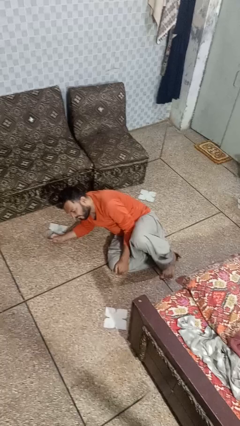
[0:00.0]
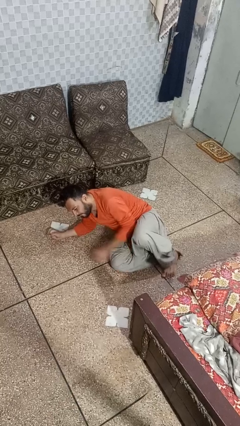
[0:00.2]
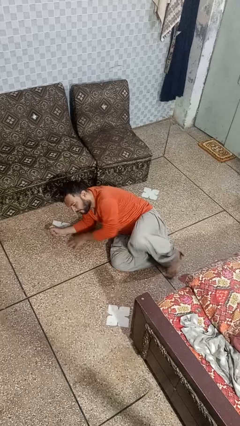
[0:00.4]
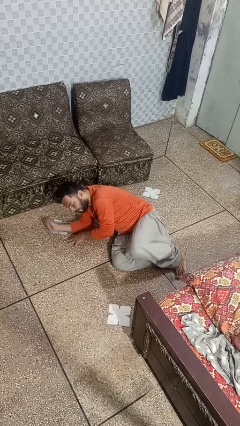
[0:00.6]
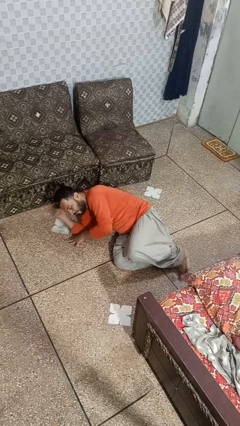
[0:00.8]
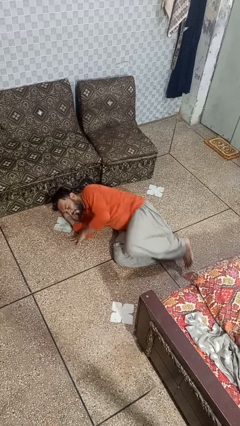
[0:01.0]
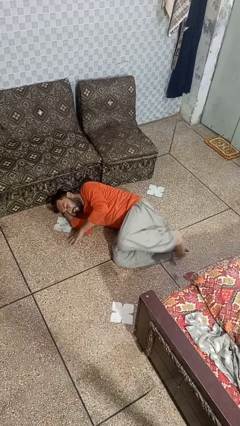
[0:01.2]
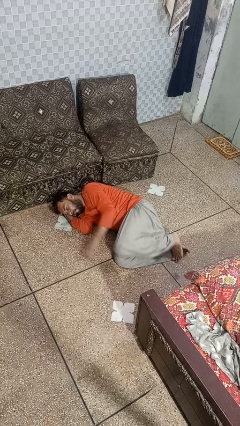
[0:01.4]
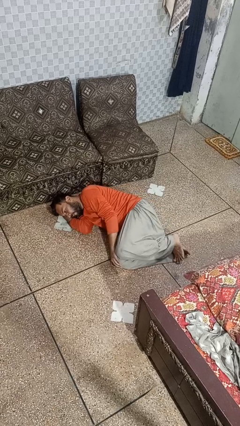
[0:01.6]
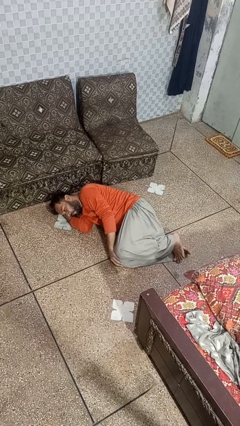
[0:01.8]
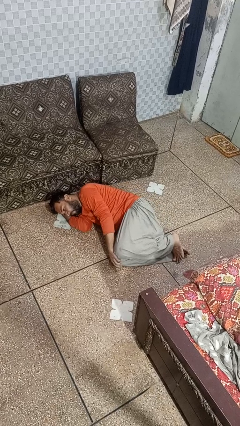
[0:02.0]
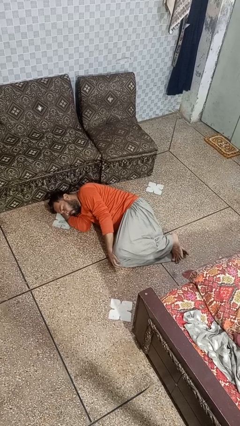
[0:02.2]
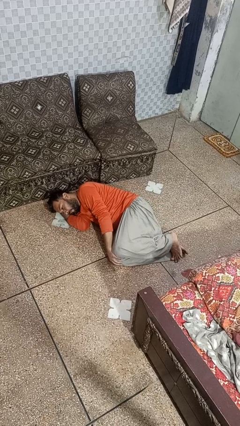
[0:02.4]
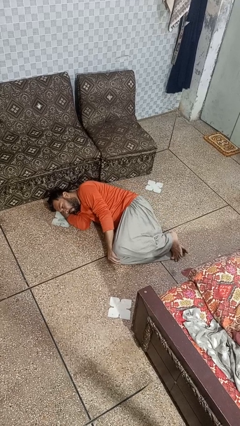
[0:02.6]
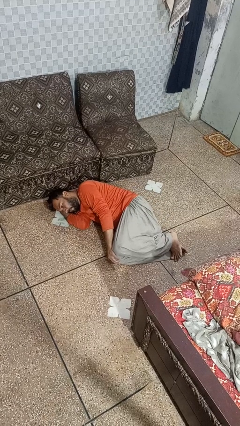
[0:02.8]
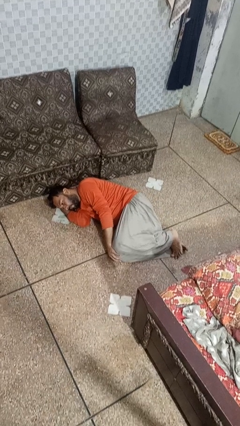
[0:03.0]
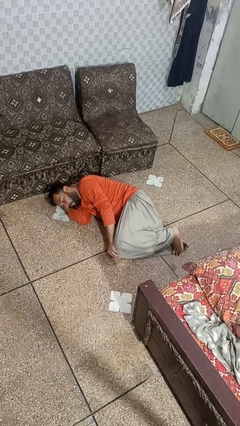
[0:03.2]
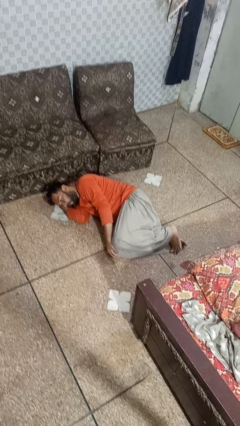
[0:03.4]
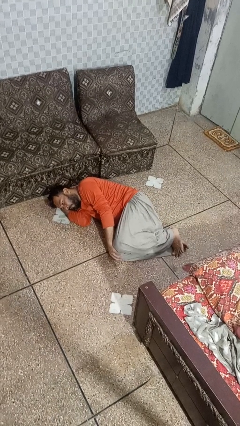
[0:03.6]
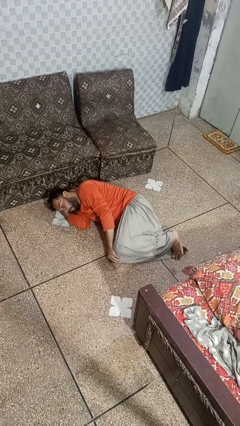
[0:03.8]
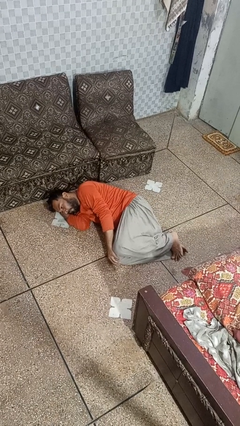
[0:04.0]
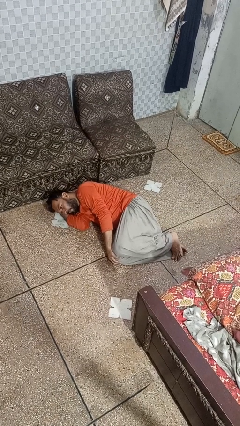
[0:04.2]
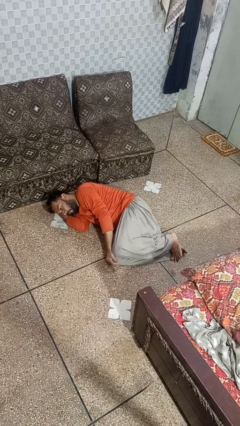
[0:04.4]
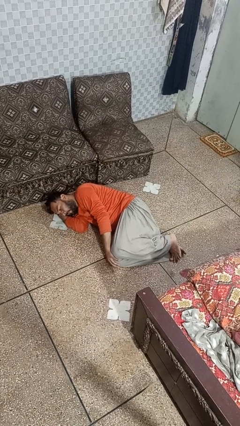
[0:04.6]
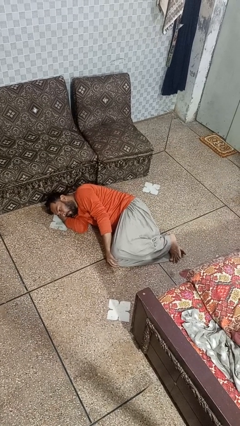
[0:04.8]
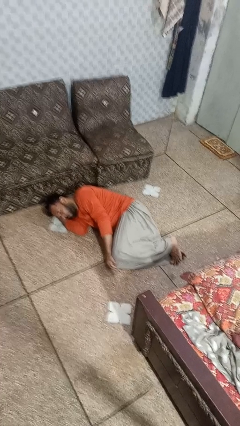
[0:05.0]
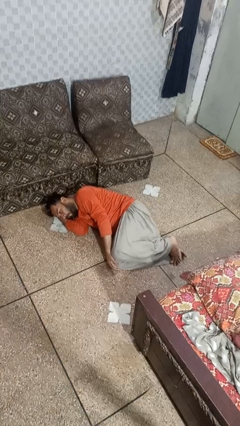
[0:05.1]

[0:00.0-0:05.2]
person lies down on floor

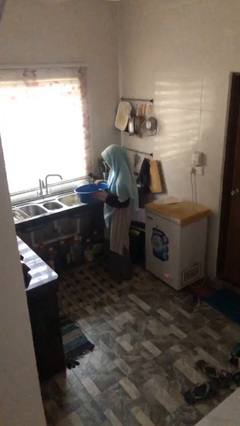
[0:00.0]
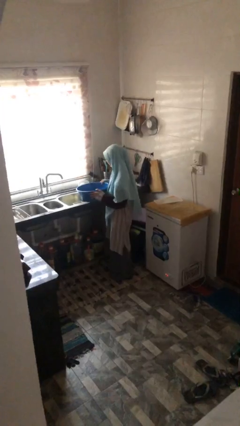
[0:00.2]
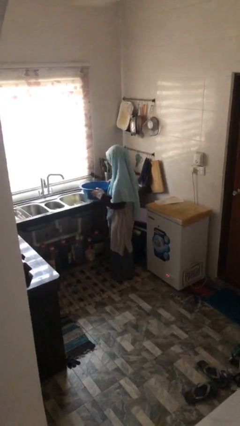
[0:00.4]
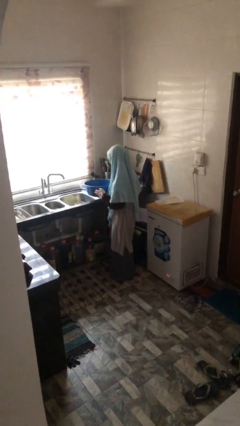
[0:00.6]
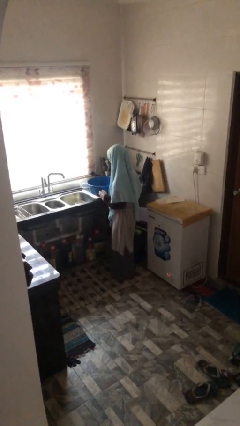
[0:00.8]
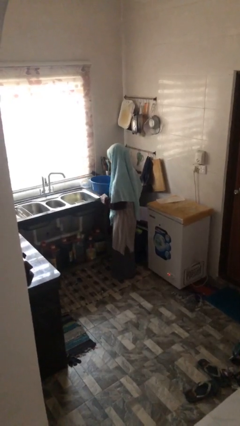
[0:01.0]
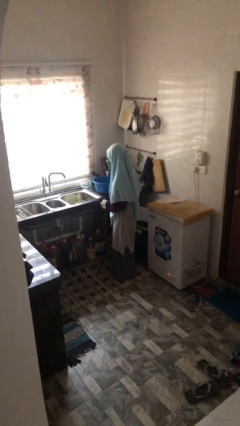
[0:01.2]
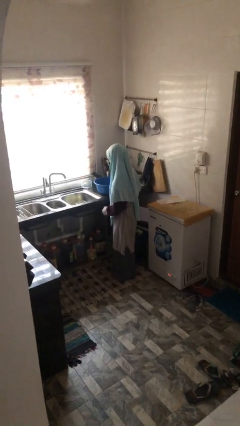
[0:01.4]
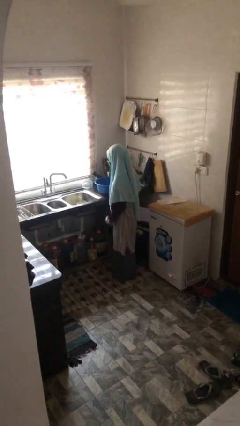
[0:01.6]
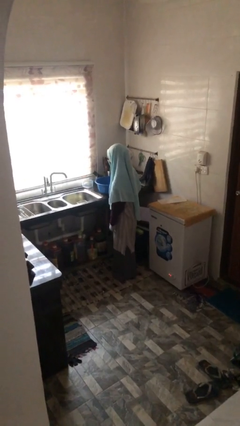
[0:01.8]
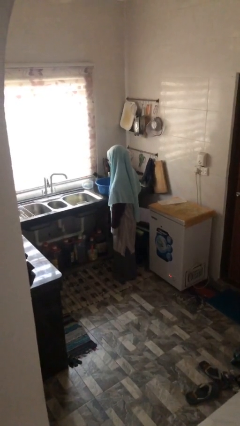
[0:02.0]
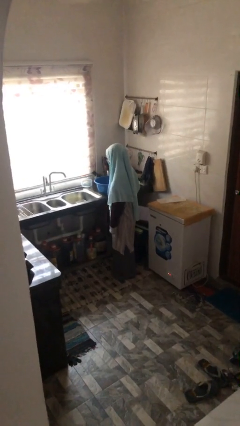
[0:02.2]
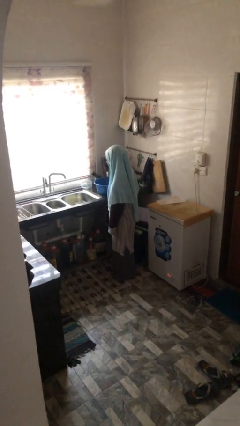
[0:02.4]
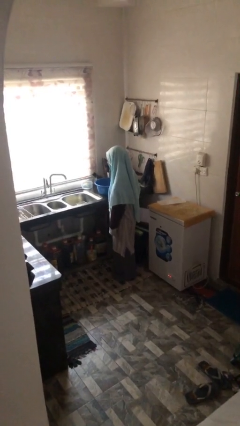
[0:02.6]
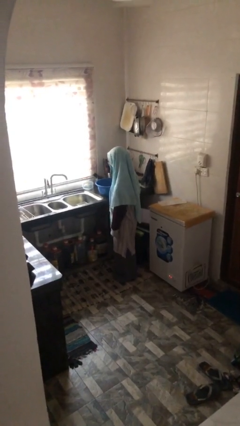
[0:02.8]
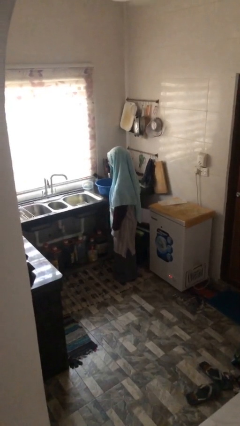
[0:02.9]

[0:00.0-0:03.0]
person puts down object on countertop

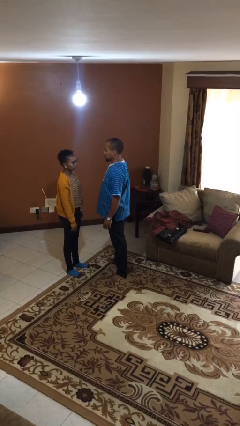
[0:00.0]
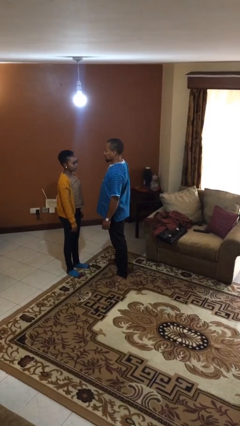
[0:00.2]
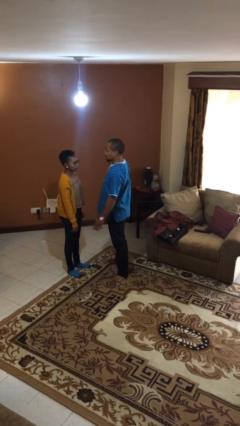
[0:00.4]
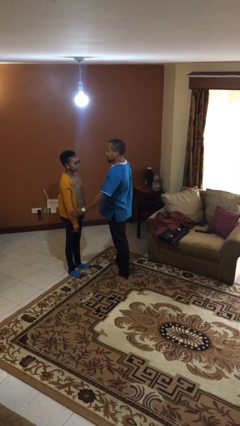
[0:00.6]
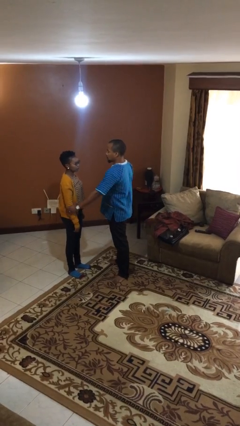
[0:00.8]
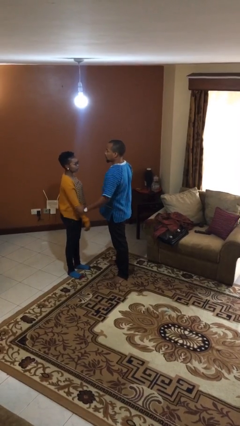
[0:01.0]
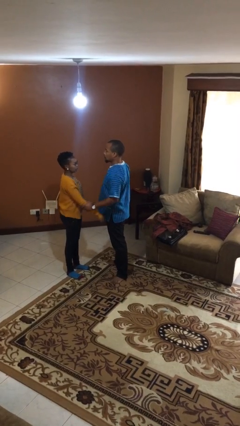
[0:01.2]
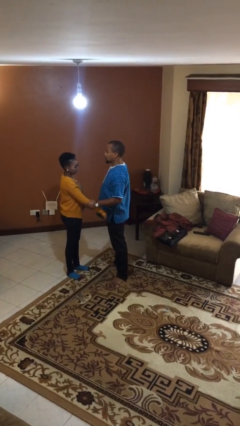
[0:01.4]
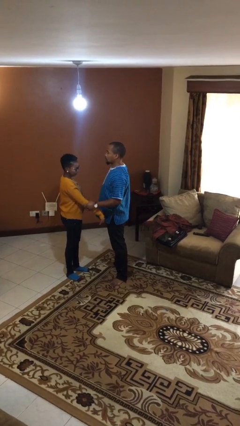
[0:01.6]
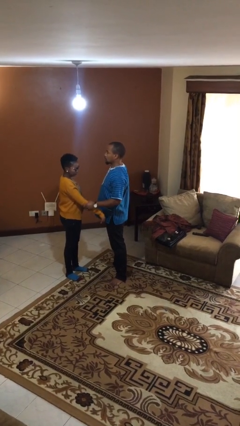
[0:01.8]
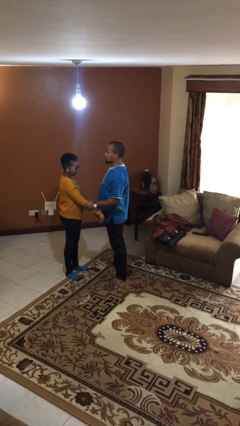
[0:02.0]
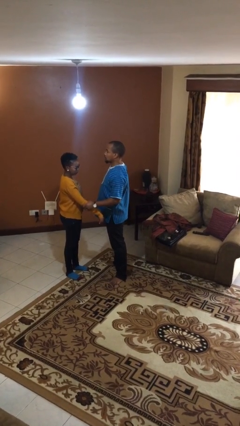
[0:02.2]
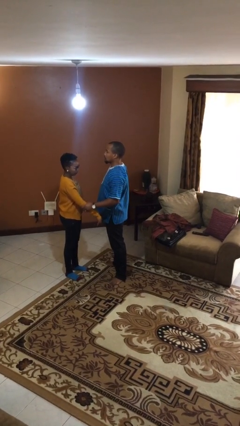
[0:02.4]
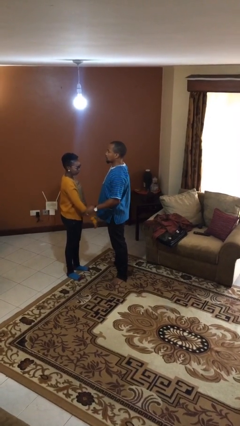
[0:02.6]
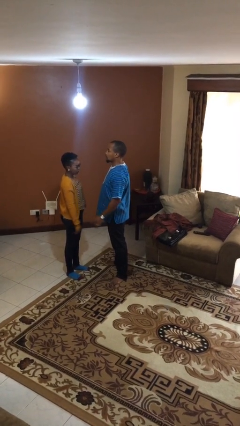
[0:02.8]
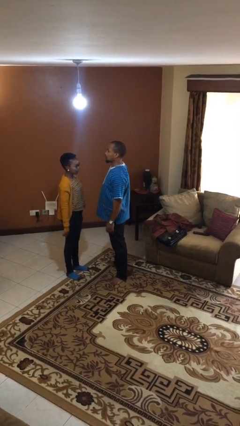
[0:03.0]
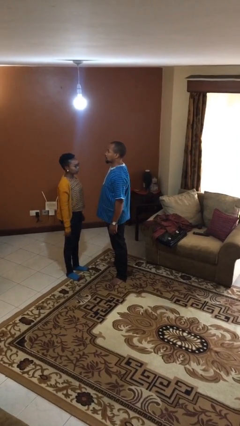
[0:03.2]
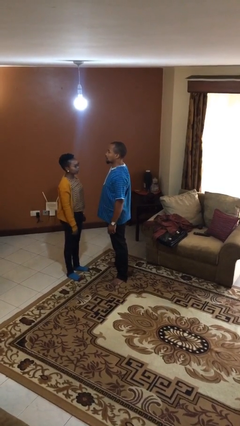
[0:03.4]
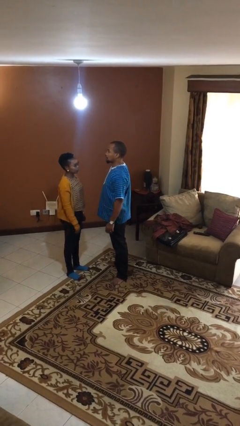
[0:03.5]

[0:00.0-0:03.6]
person grabs person by forearm

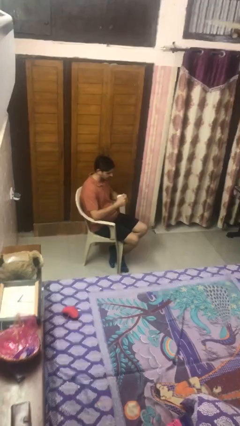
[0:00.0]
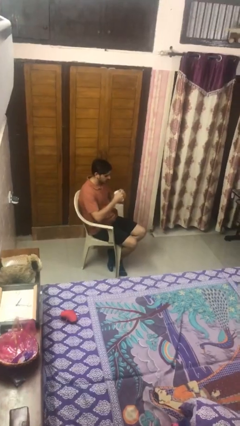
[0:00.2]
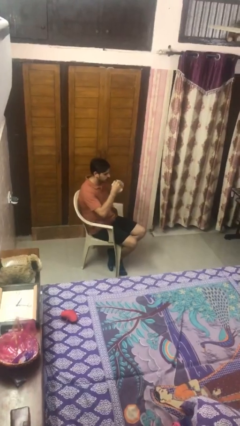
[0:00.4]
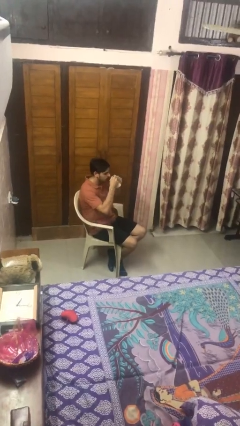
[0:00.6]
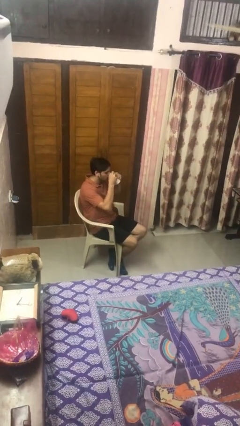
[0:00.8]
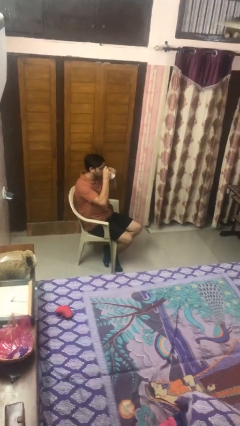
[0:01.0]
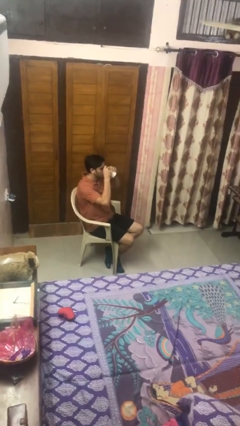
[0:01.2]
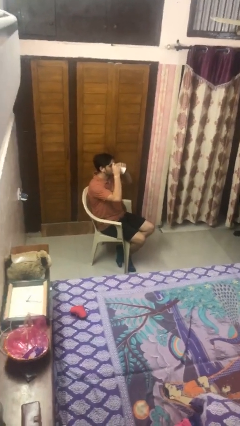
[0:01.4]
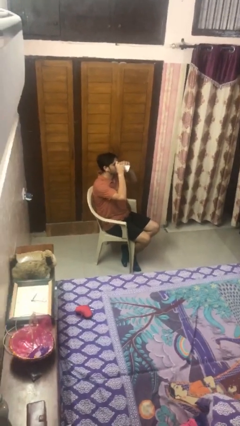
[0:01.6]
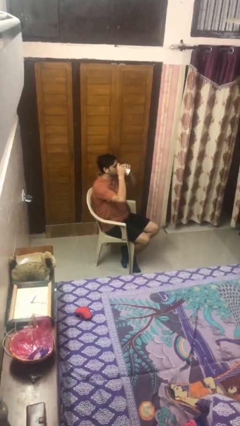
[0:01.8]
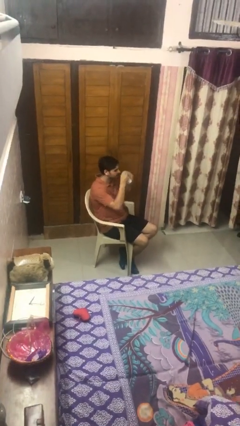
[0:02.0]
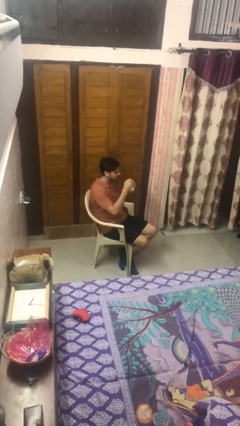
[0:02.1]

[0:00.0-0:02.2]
person drinks from mug

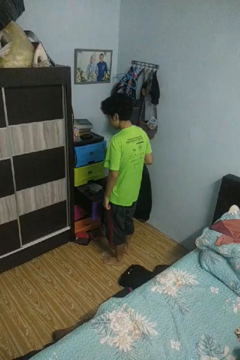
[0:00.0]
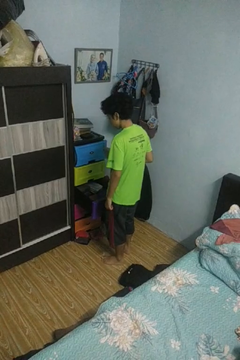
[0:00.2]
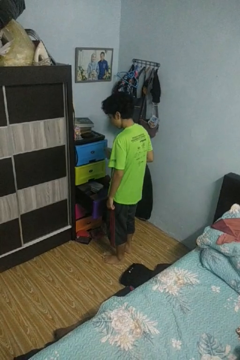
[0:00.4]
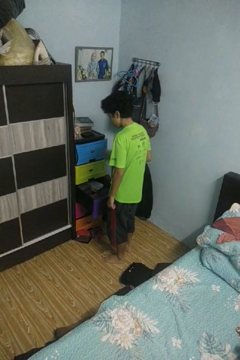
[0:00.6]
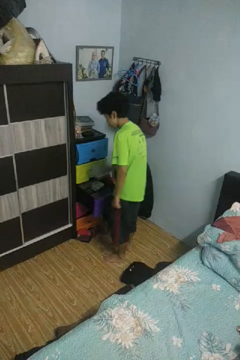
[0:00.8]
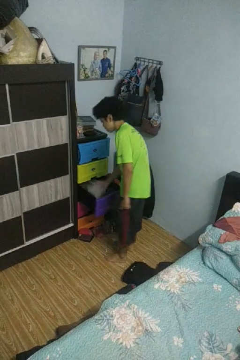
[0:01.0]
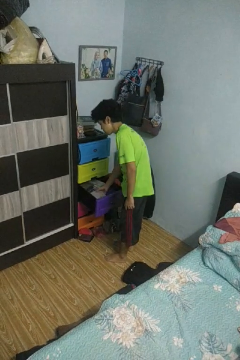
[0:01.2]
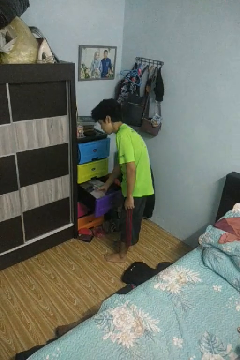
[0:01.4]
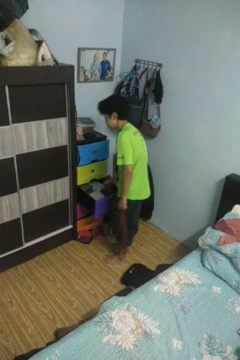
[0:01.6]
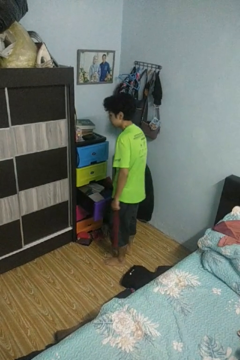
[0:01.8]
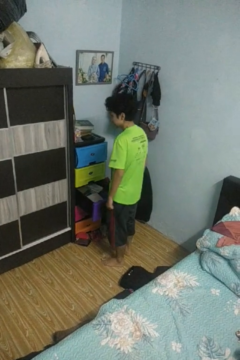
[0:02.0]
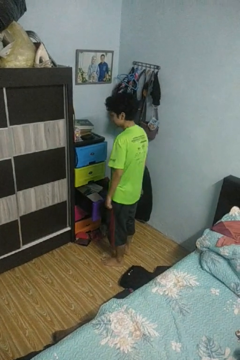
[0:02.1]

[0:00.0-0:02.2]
person puts clothes into dresser

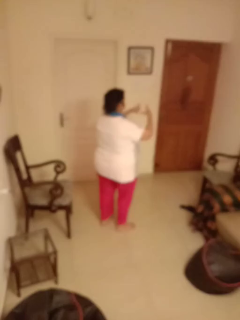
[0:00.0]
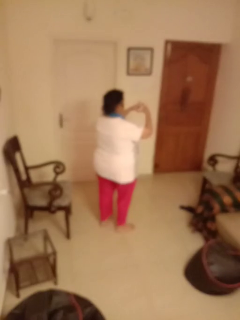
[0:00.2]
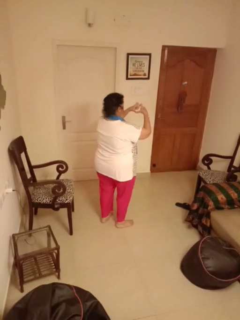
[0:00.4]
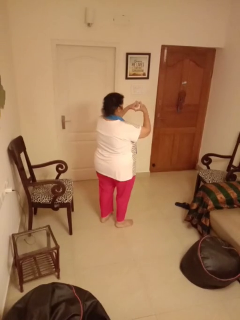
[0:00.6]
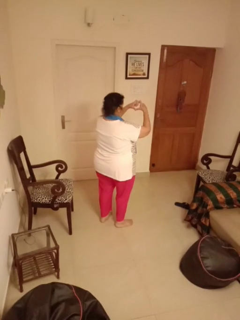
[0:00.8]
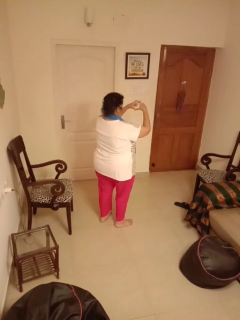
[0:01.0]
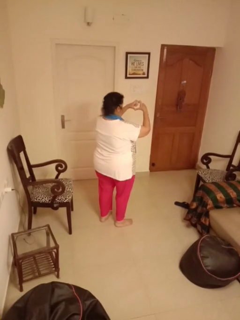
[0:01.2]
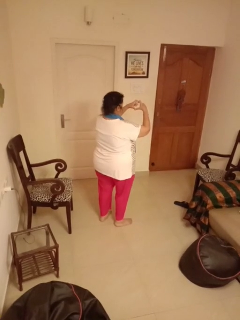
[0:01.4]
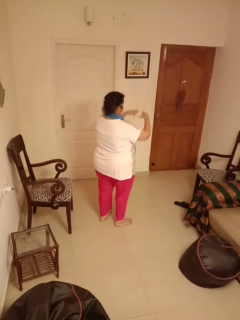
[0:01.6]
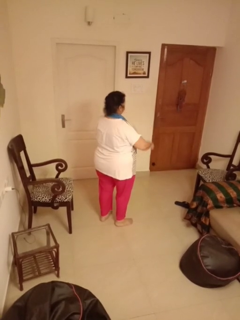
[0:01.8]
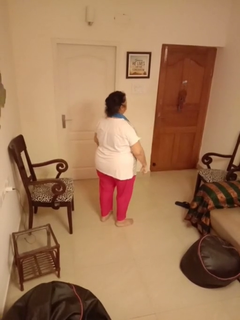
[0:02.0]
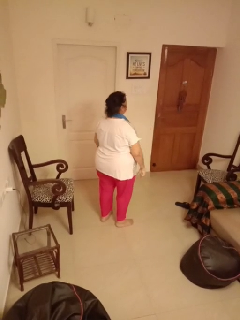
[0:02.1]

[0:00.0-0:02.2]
person gestures heart
